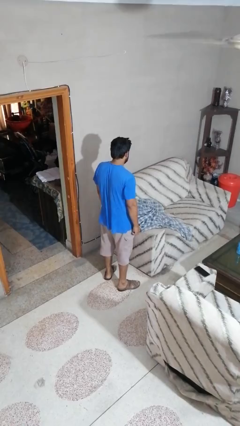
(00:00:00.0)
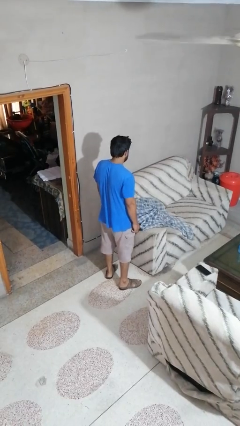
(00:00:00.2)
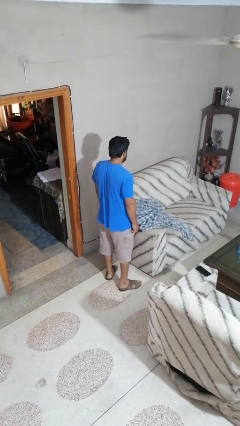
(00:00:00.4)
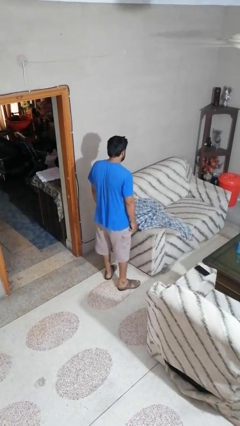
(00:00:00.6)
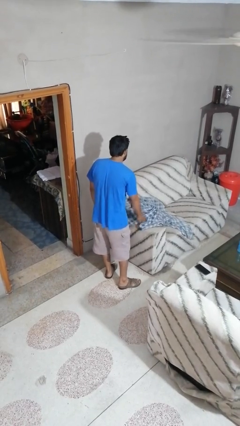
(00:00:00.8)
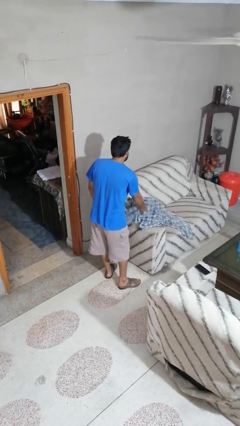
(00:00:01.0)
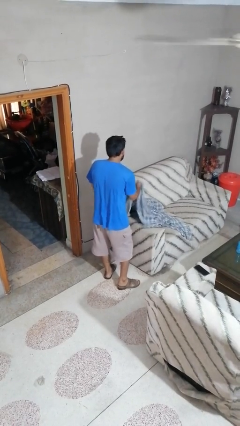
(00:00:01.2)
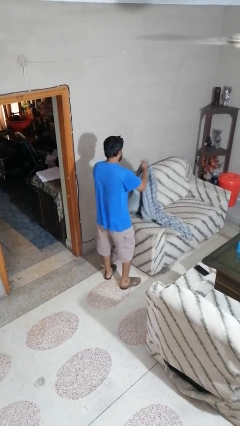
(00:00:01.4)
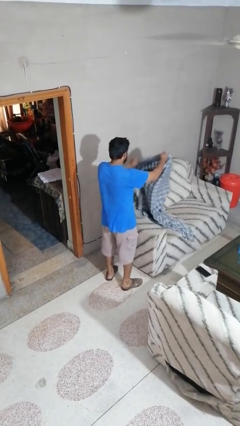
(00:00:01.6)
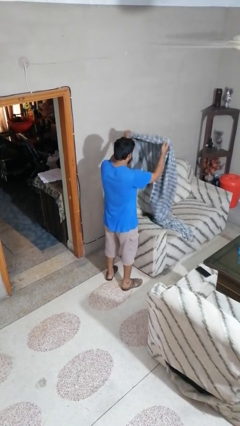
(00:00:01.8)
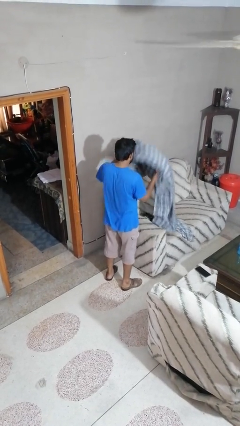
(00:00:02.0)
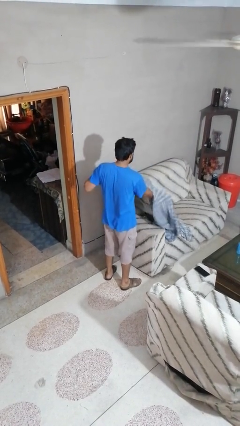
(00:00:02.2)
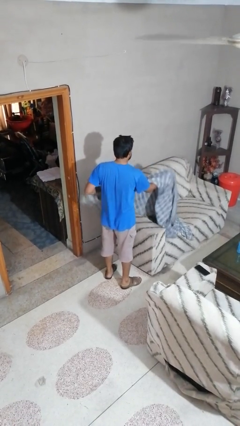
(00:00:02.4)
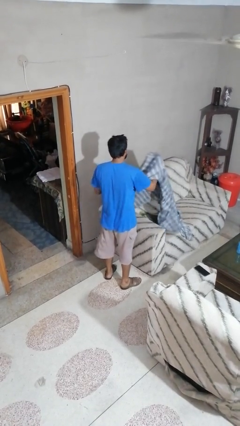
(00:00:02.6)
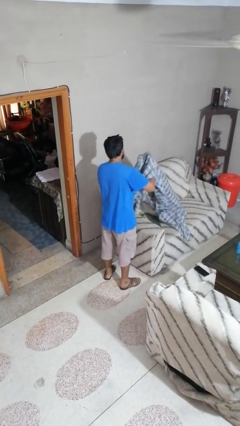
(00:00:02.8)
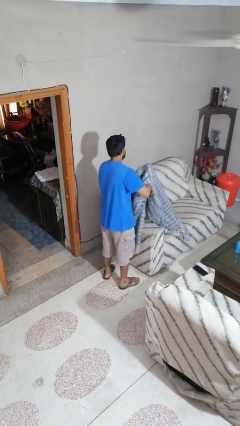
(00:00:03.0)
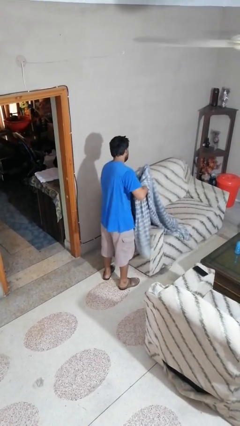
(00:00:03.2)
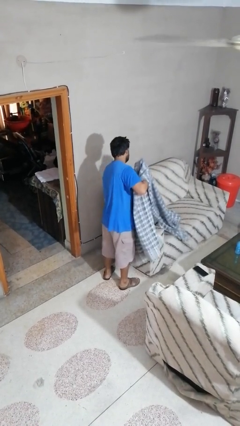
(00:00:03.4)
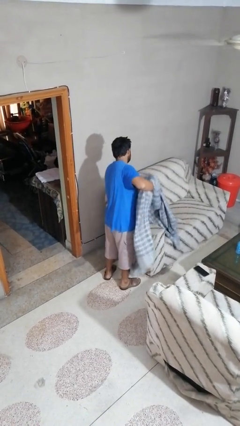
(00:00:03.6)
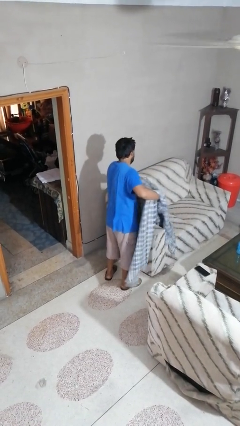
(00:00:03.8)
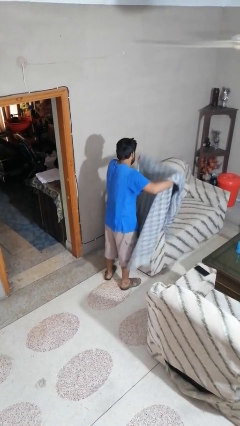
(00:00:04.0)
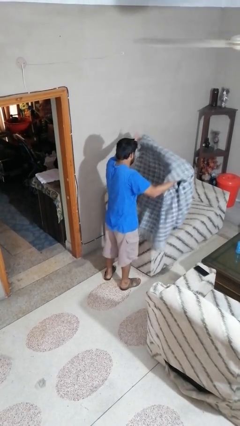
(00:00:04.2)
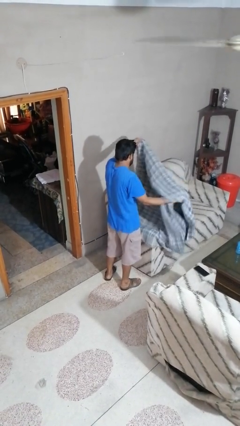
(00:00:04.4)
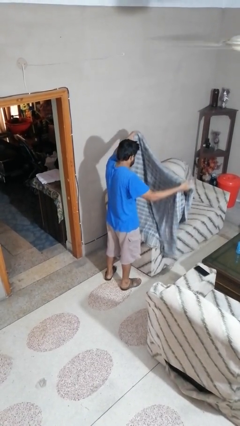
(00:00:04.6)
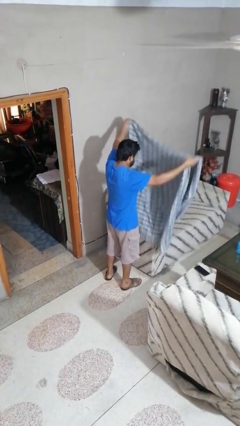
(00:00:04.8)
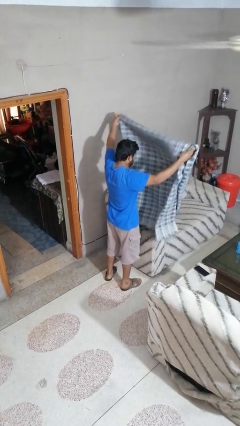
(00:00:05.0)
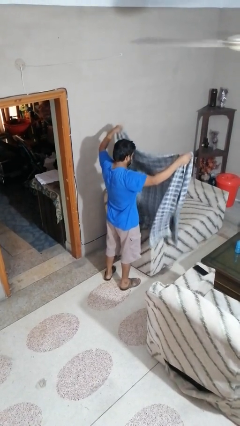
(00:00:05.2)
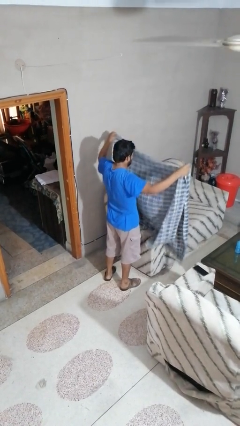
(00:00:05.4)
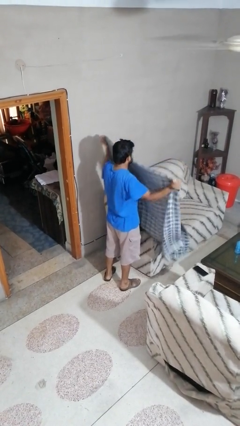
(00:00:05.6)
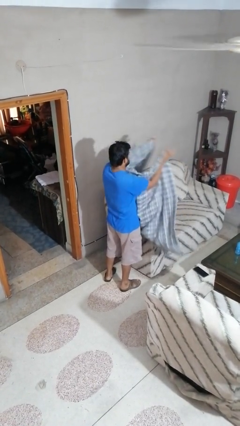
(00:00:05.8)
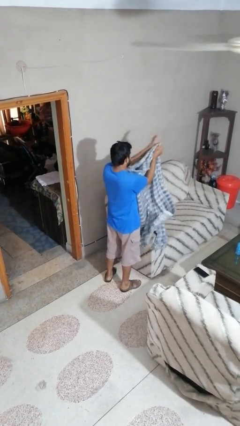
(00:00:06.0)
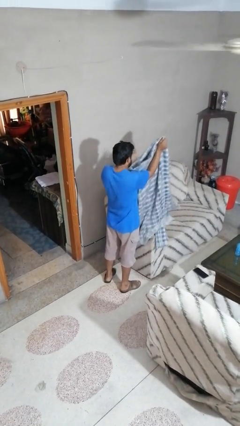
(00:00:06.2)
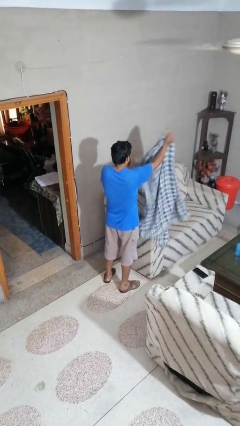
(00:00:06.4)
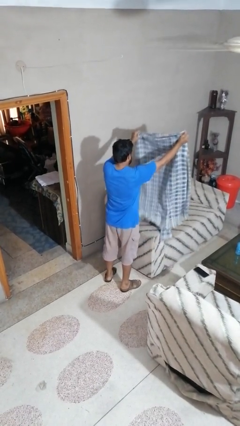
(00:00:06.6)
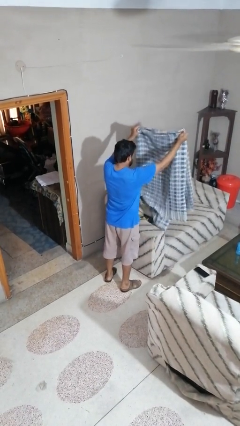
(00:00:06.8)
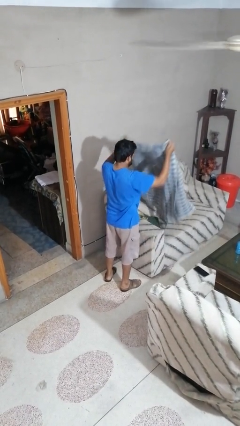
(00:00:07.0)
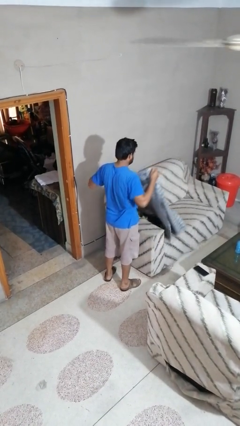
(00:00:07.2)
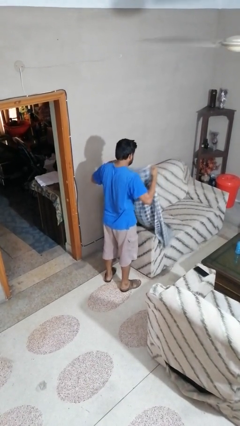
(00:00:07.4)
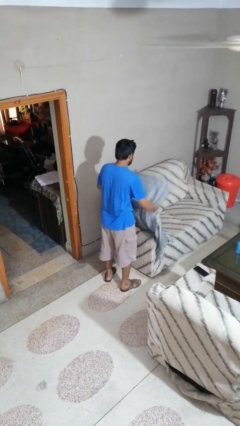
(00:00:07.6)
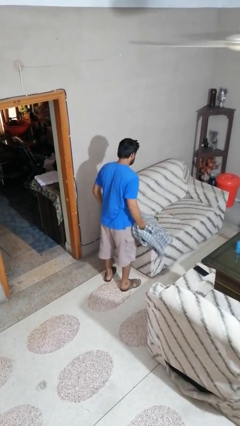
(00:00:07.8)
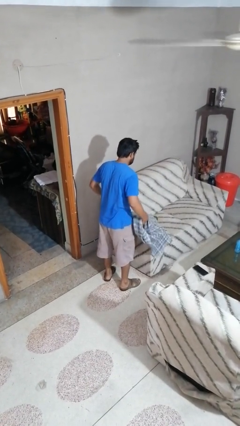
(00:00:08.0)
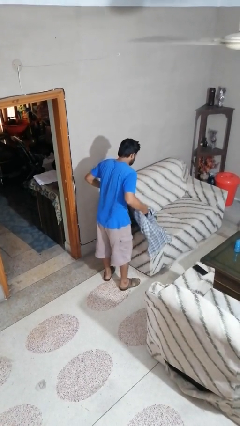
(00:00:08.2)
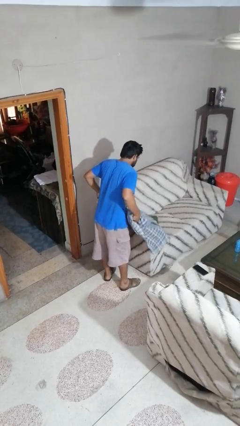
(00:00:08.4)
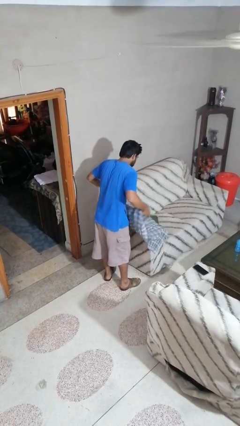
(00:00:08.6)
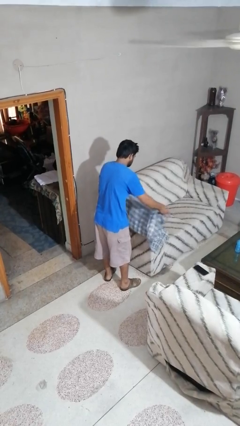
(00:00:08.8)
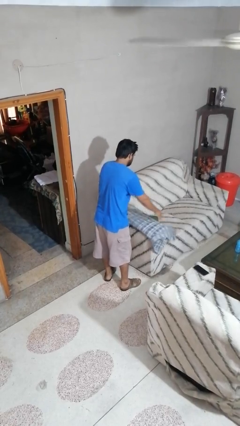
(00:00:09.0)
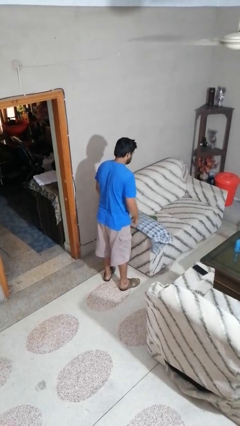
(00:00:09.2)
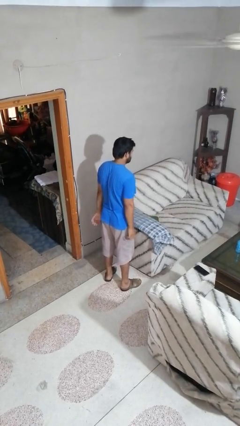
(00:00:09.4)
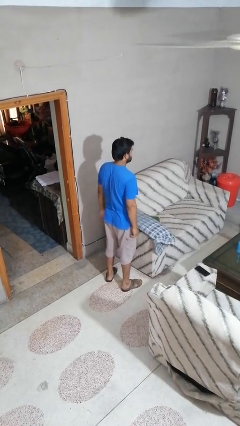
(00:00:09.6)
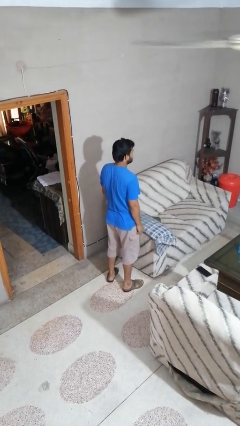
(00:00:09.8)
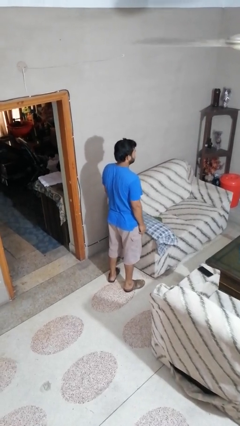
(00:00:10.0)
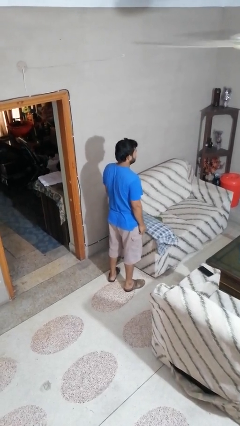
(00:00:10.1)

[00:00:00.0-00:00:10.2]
person folds blanket

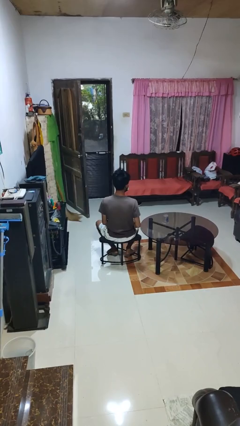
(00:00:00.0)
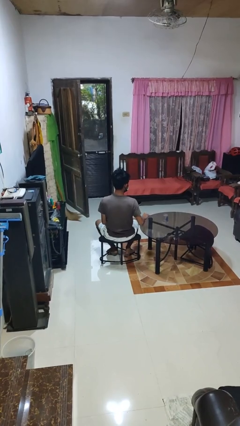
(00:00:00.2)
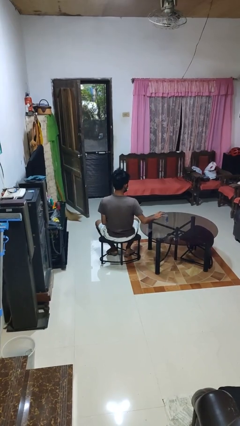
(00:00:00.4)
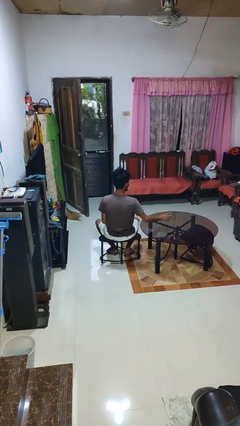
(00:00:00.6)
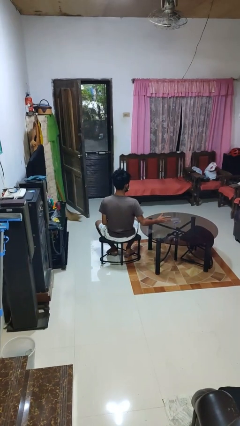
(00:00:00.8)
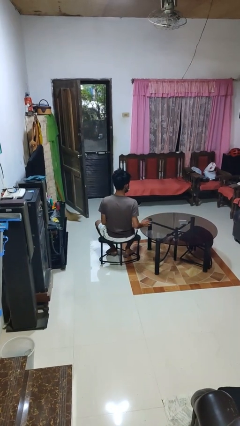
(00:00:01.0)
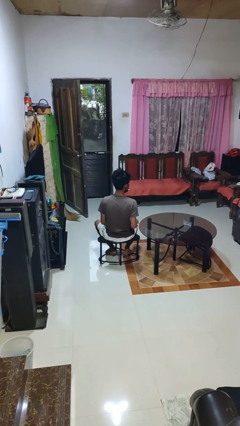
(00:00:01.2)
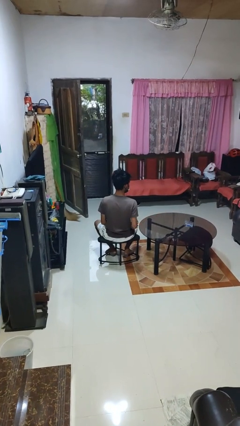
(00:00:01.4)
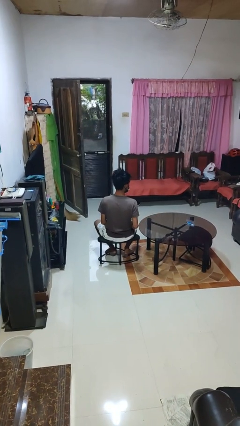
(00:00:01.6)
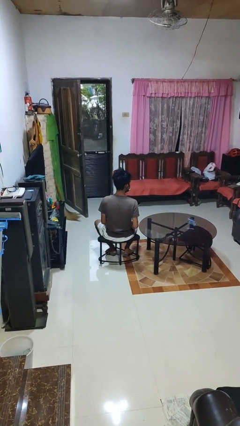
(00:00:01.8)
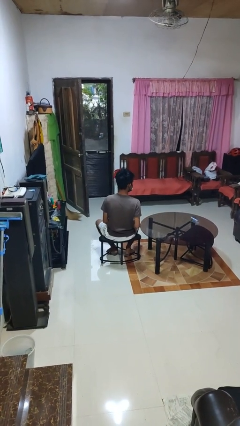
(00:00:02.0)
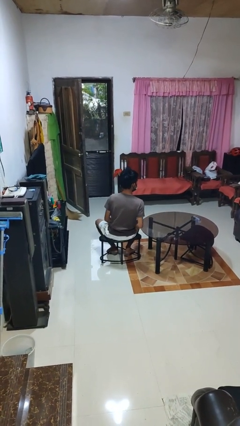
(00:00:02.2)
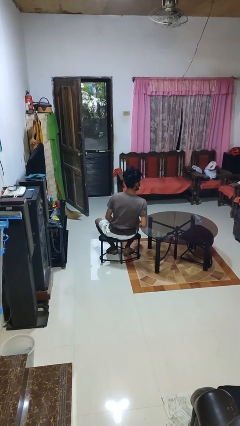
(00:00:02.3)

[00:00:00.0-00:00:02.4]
person knocks over glass

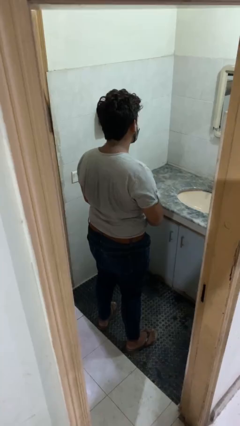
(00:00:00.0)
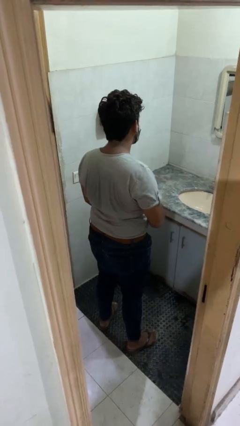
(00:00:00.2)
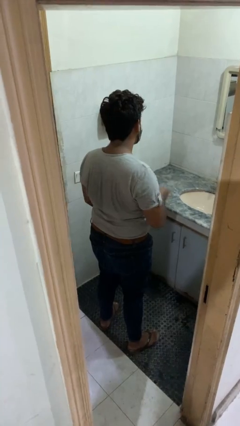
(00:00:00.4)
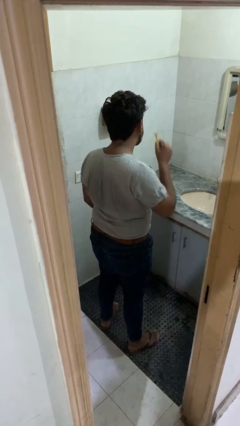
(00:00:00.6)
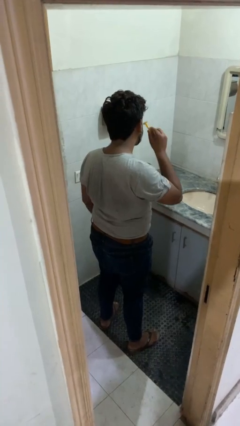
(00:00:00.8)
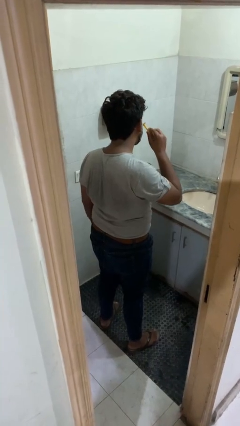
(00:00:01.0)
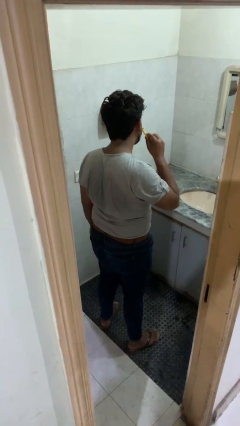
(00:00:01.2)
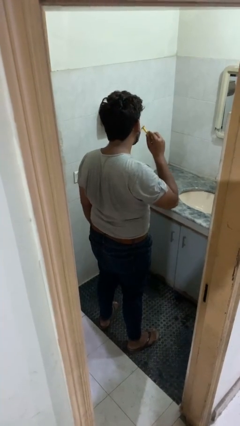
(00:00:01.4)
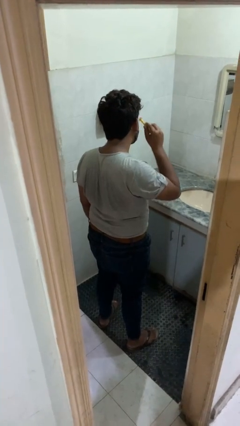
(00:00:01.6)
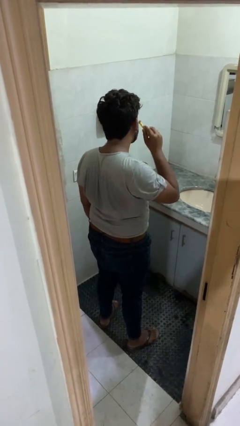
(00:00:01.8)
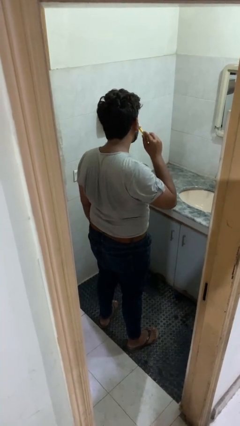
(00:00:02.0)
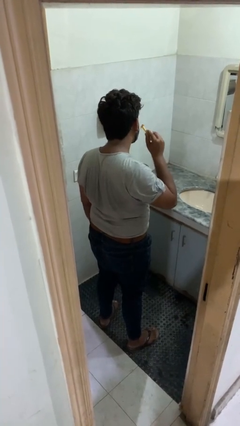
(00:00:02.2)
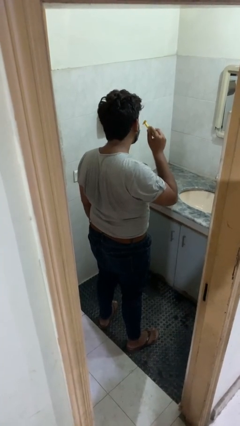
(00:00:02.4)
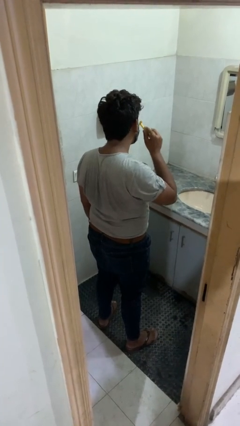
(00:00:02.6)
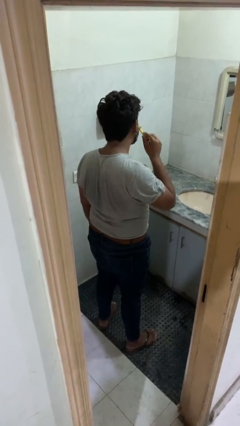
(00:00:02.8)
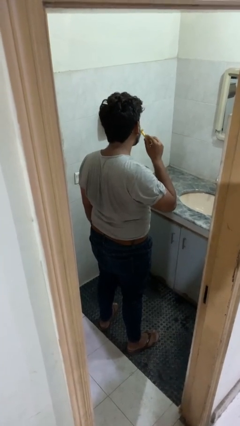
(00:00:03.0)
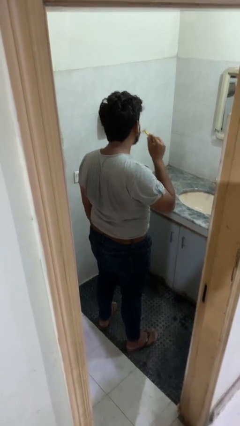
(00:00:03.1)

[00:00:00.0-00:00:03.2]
person shaves face

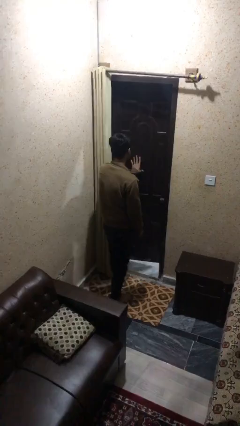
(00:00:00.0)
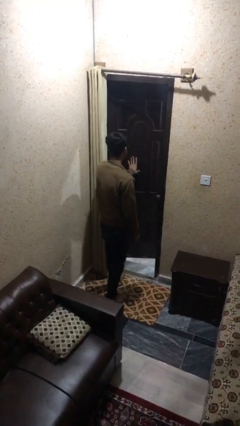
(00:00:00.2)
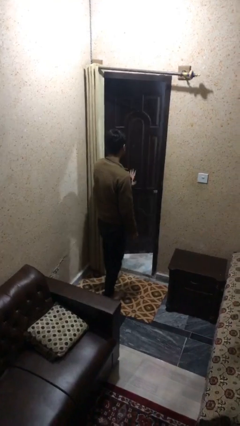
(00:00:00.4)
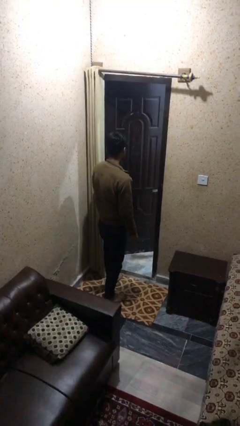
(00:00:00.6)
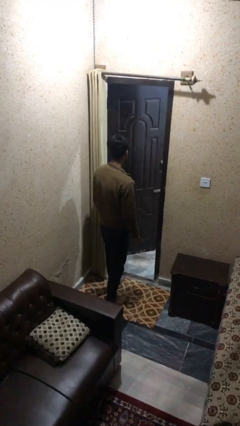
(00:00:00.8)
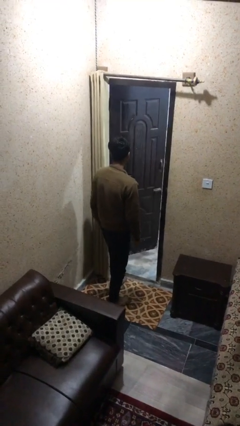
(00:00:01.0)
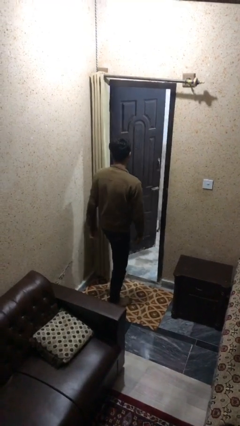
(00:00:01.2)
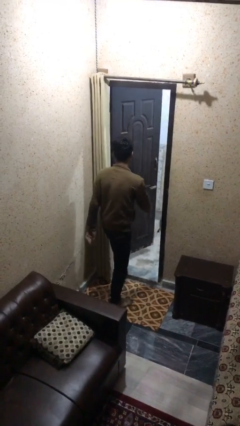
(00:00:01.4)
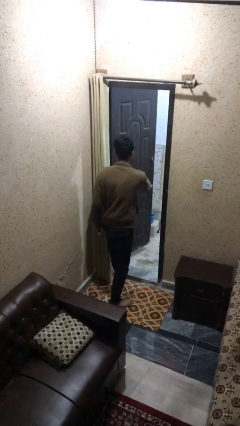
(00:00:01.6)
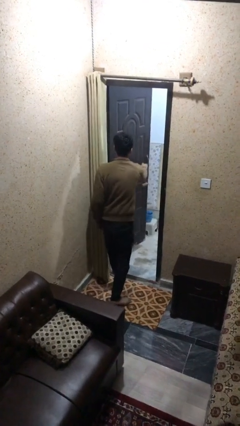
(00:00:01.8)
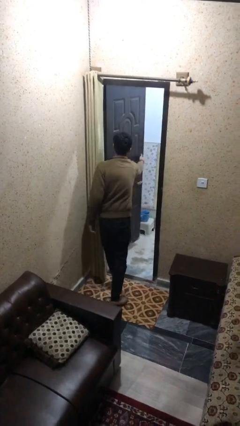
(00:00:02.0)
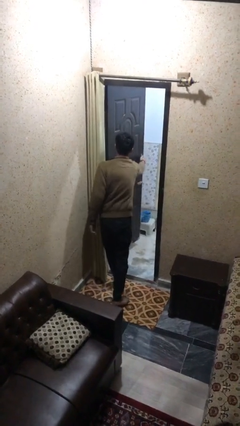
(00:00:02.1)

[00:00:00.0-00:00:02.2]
person opens facility door
